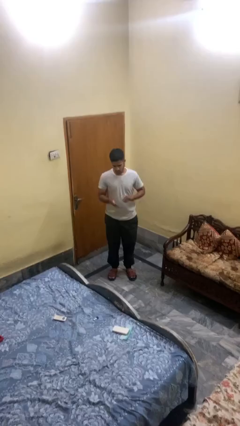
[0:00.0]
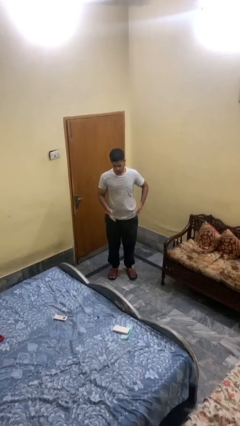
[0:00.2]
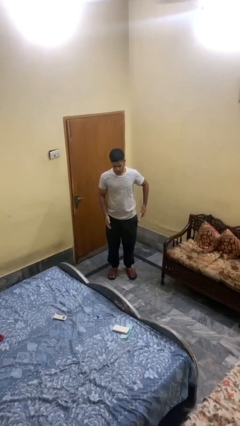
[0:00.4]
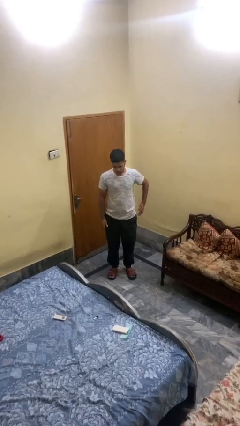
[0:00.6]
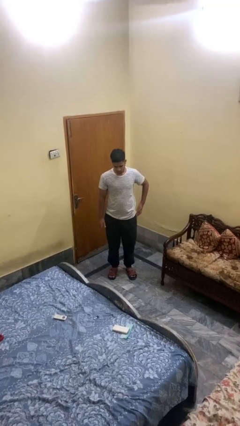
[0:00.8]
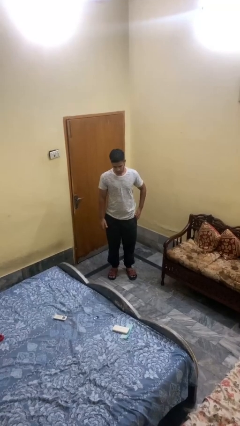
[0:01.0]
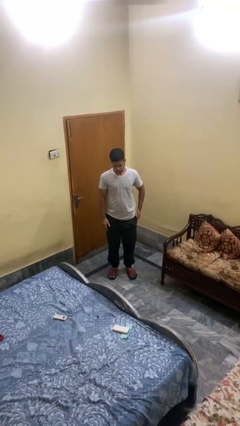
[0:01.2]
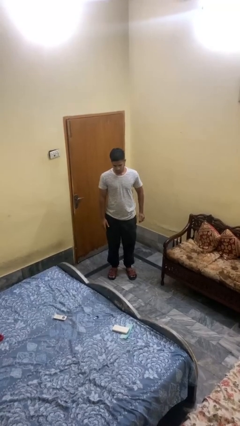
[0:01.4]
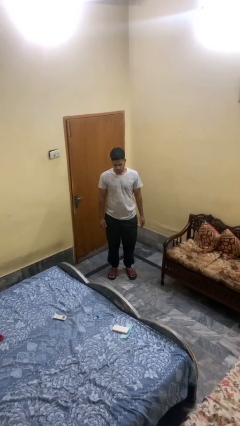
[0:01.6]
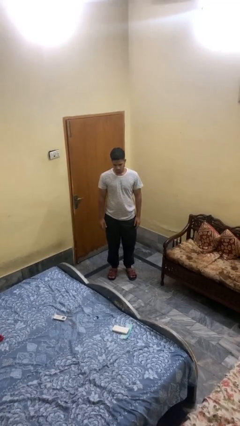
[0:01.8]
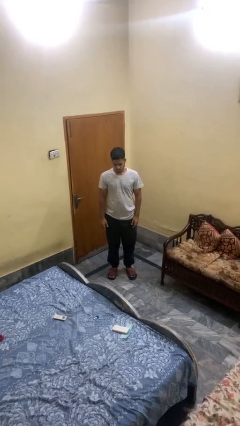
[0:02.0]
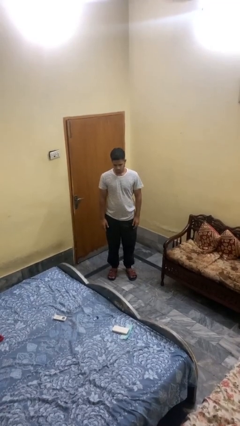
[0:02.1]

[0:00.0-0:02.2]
person puts phone into pocket

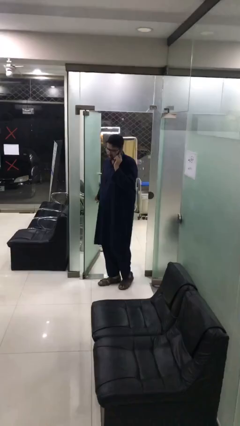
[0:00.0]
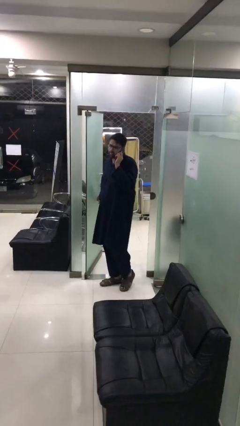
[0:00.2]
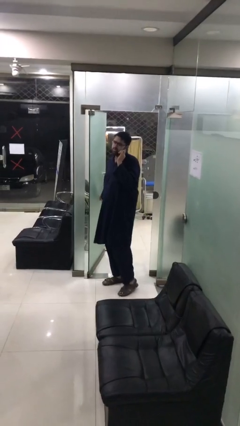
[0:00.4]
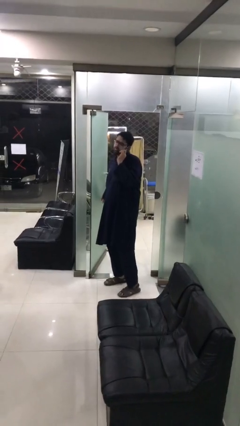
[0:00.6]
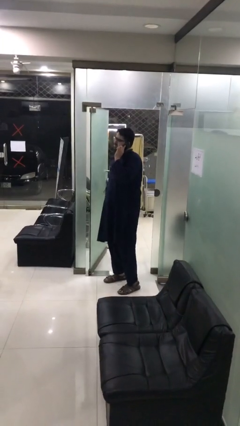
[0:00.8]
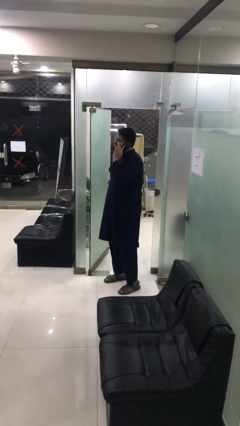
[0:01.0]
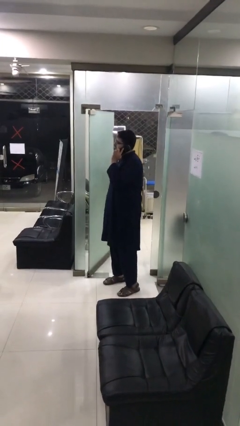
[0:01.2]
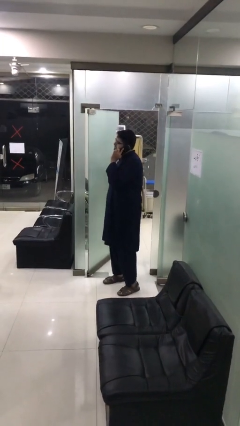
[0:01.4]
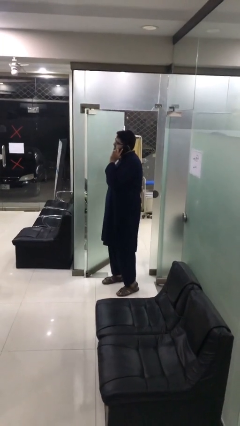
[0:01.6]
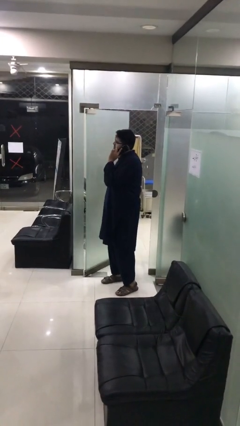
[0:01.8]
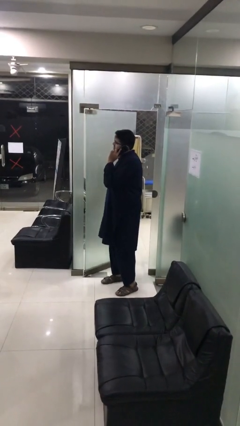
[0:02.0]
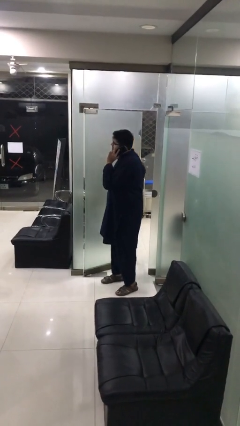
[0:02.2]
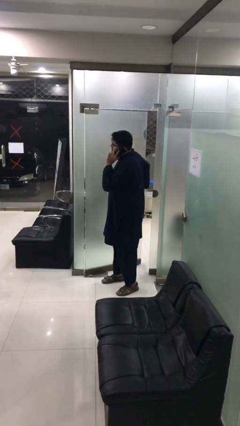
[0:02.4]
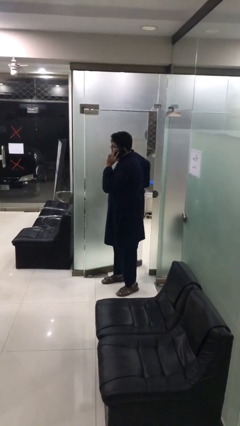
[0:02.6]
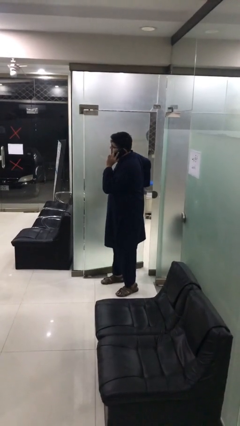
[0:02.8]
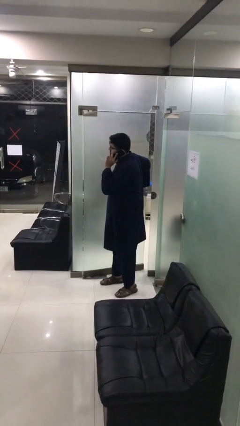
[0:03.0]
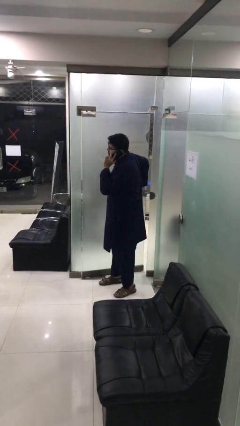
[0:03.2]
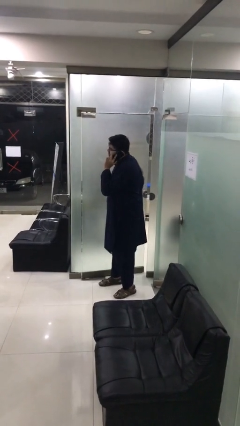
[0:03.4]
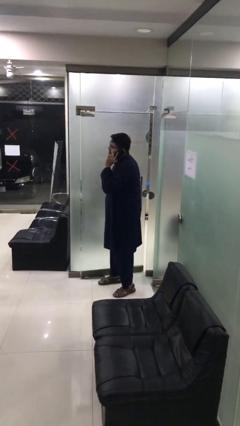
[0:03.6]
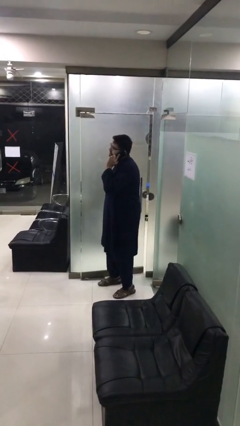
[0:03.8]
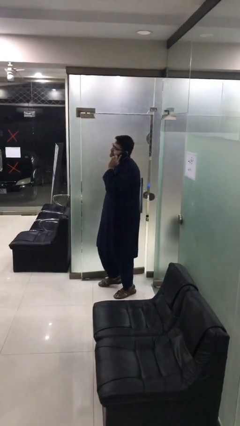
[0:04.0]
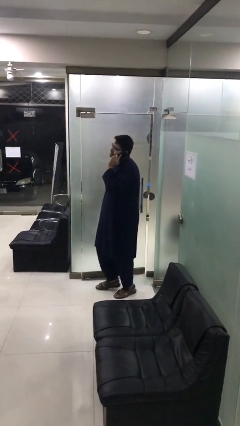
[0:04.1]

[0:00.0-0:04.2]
person closes facility door

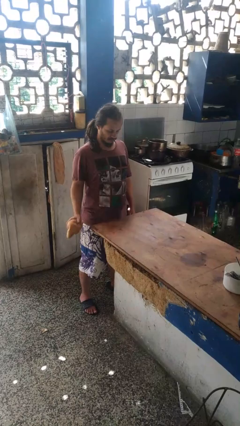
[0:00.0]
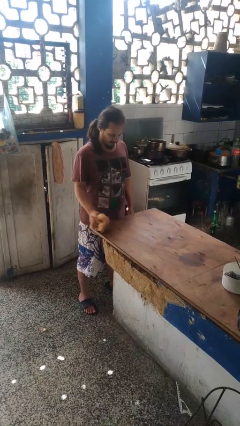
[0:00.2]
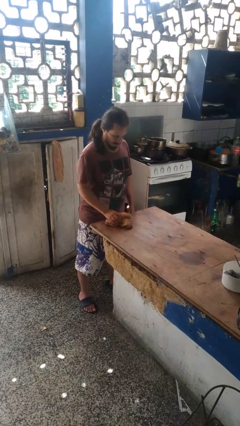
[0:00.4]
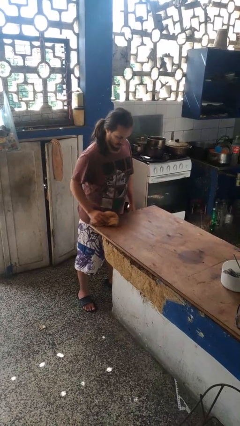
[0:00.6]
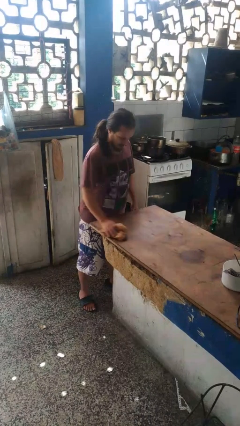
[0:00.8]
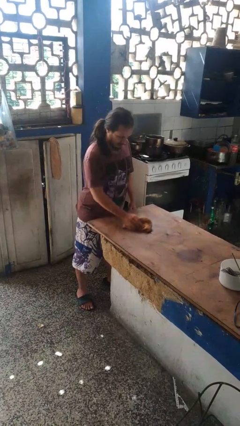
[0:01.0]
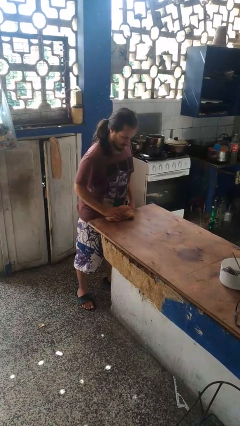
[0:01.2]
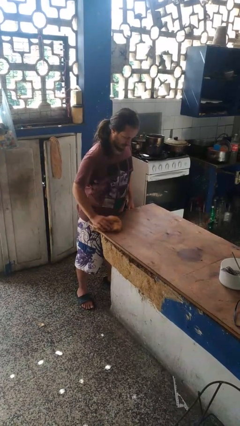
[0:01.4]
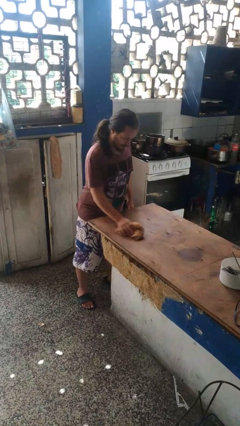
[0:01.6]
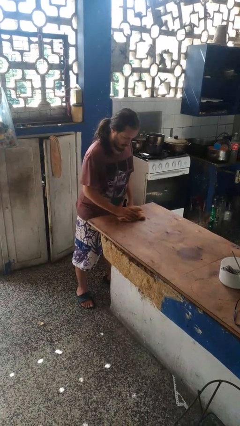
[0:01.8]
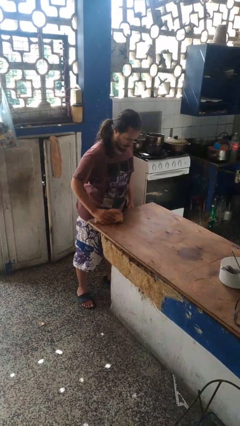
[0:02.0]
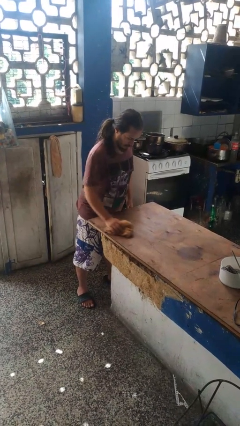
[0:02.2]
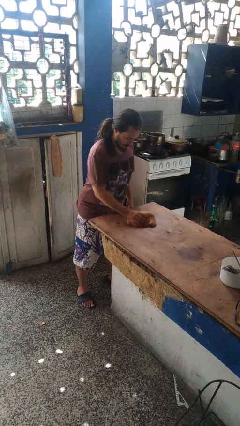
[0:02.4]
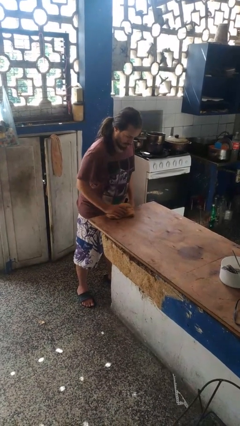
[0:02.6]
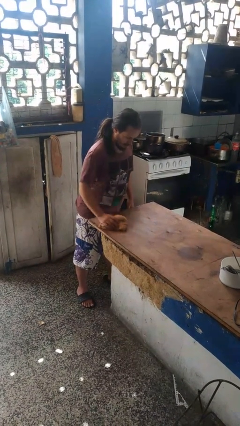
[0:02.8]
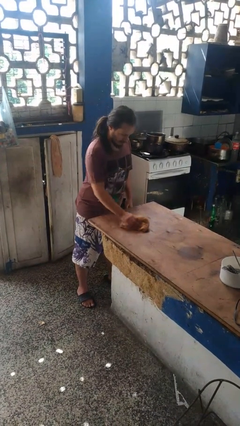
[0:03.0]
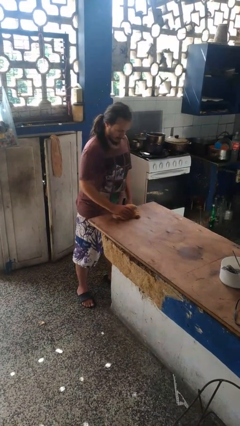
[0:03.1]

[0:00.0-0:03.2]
person cleans table with rag

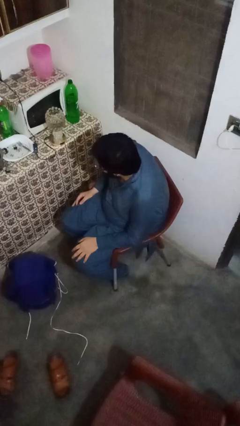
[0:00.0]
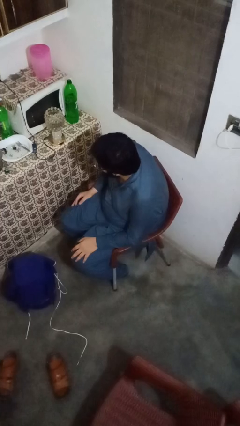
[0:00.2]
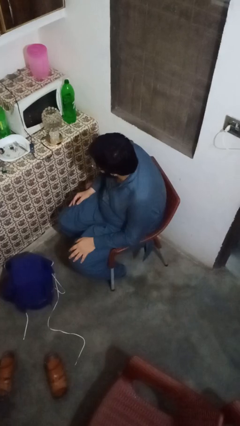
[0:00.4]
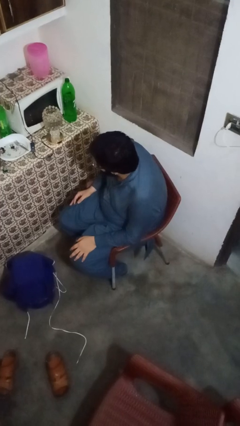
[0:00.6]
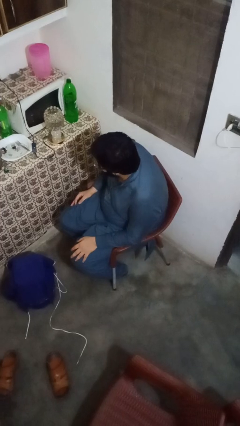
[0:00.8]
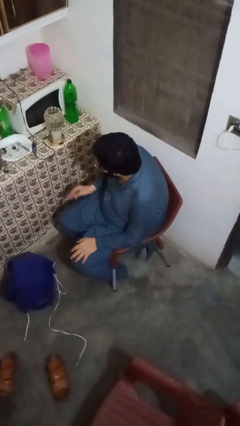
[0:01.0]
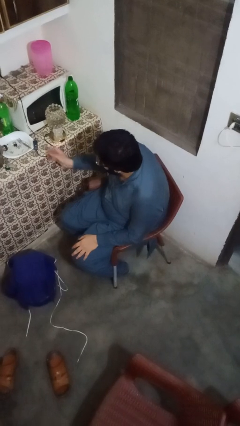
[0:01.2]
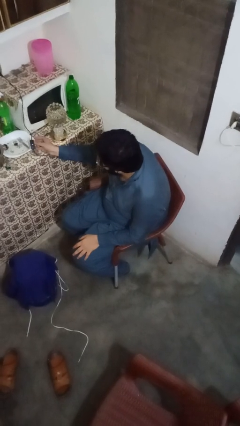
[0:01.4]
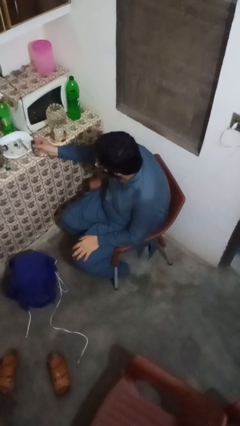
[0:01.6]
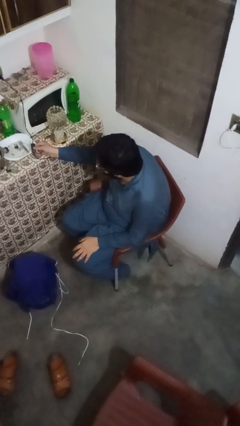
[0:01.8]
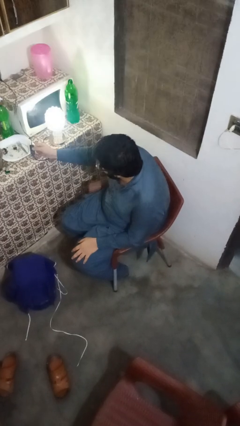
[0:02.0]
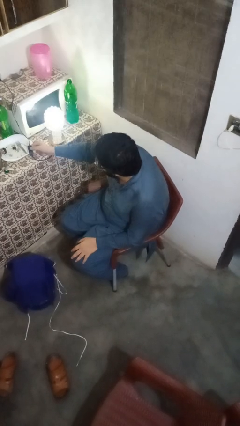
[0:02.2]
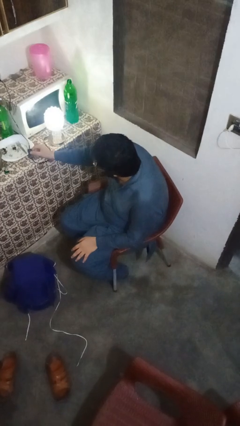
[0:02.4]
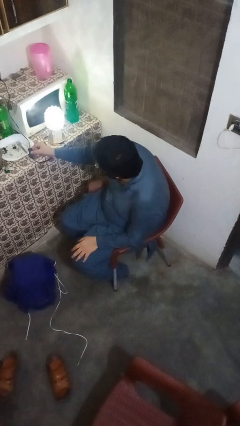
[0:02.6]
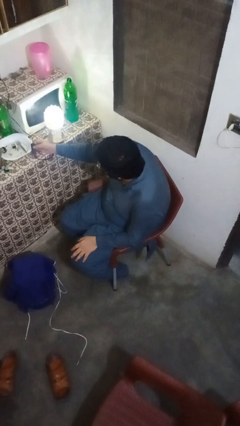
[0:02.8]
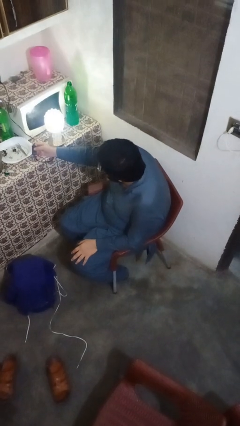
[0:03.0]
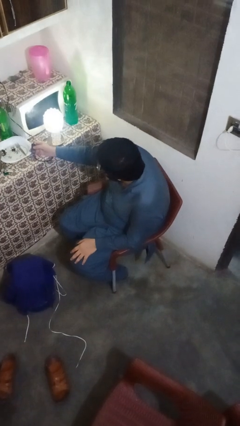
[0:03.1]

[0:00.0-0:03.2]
person turns on lamp

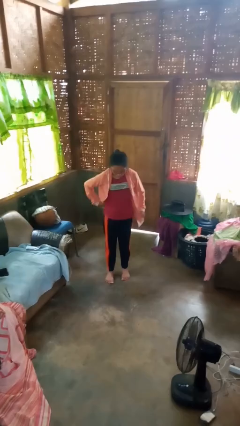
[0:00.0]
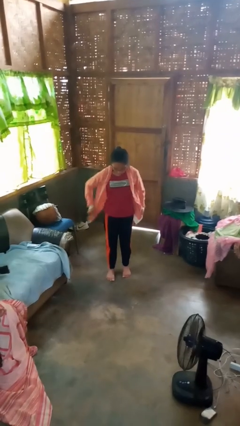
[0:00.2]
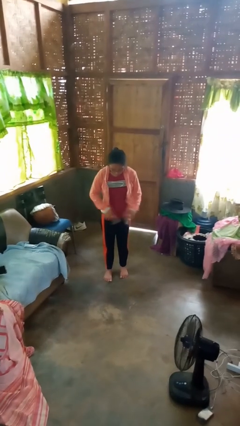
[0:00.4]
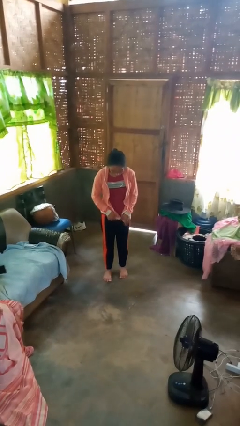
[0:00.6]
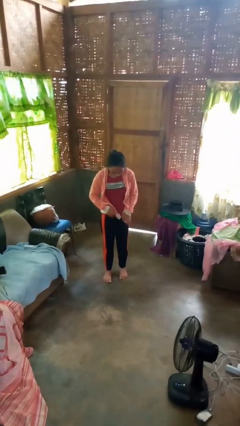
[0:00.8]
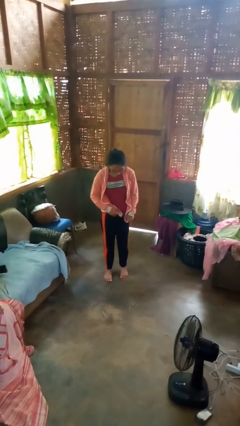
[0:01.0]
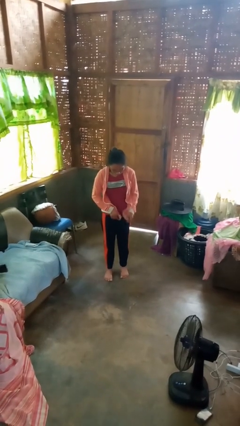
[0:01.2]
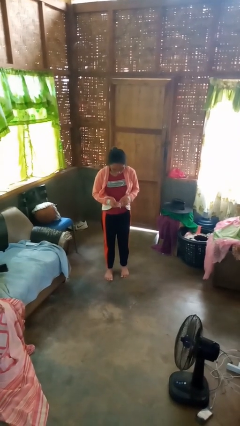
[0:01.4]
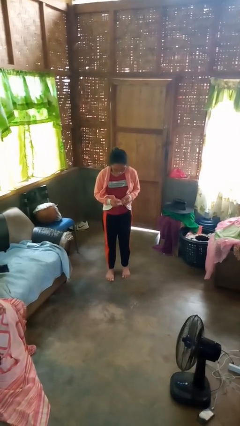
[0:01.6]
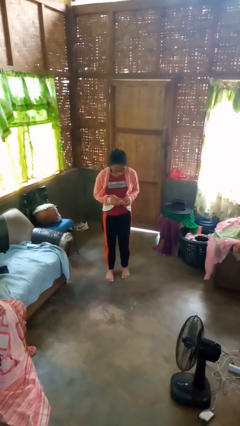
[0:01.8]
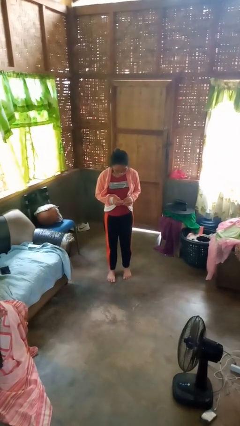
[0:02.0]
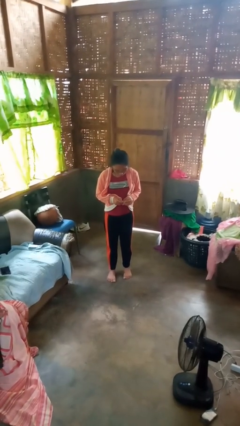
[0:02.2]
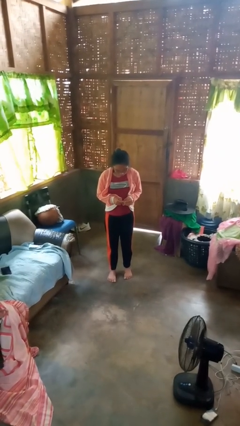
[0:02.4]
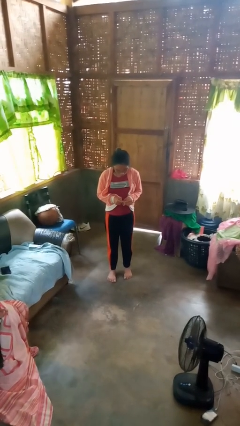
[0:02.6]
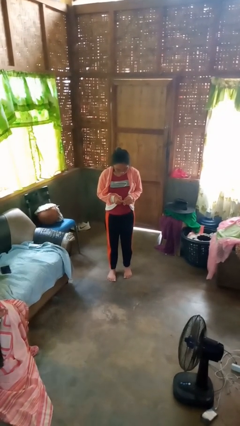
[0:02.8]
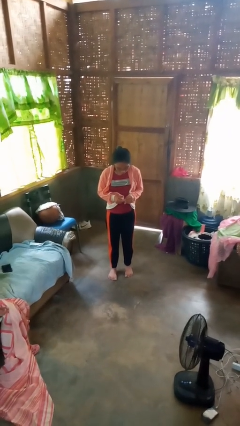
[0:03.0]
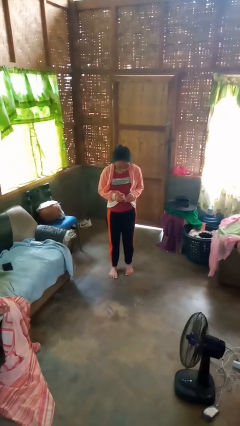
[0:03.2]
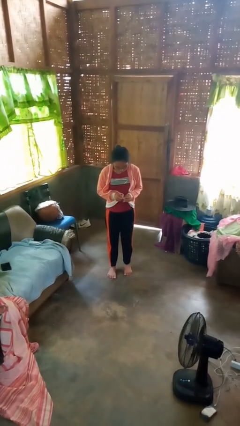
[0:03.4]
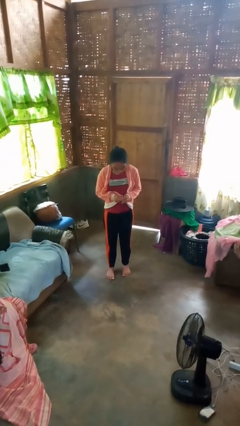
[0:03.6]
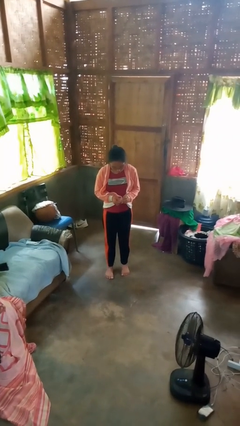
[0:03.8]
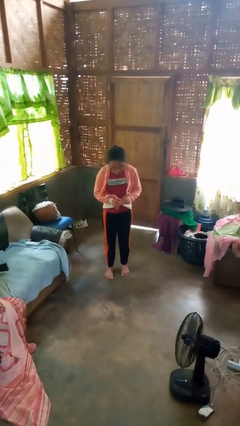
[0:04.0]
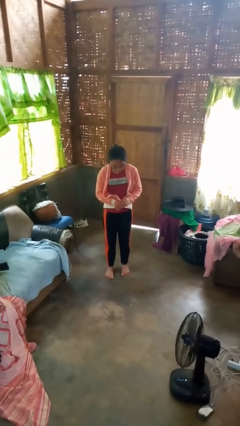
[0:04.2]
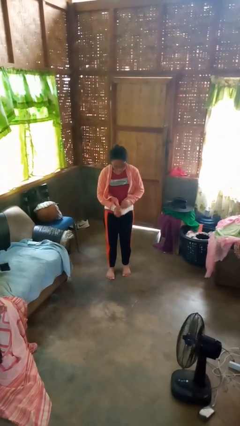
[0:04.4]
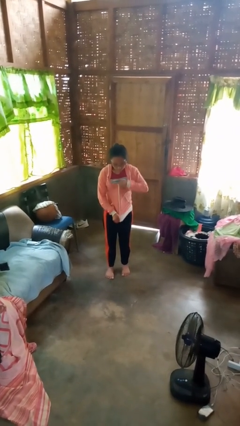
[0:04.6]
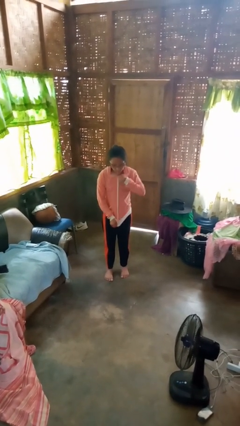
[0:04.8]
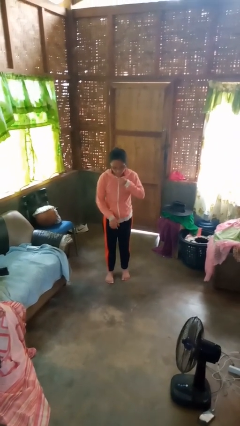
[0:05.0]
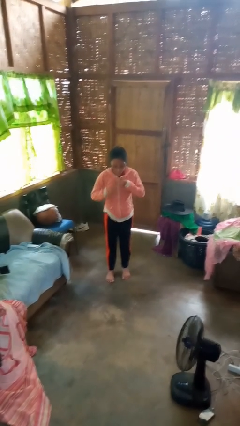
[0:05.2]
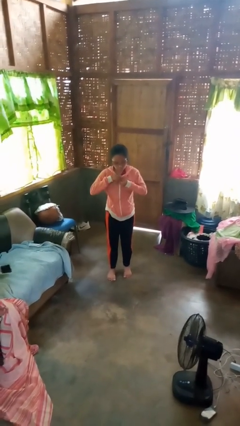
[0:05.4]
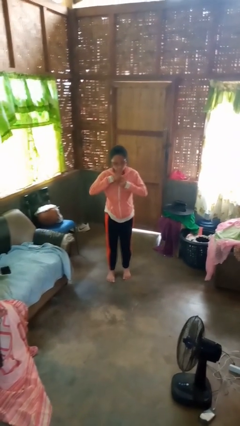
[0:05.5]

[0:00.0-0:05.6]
person zips up jacket
